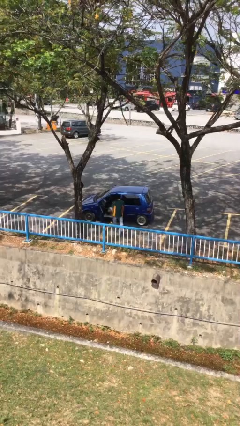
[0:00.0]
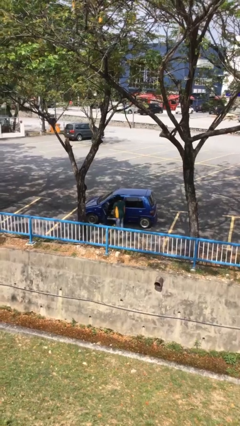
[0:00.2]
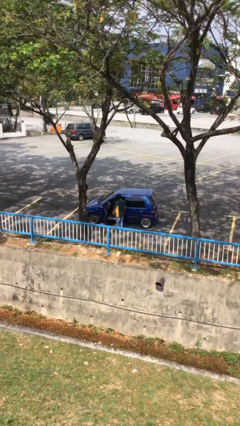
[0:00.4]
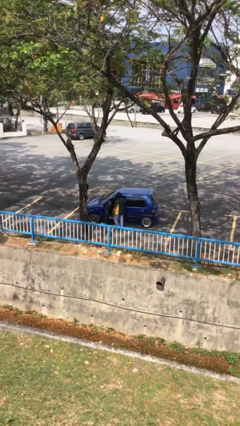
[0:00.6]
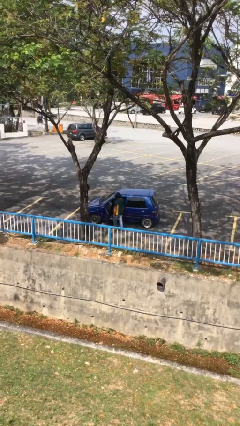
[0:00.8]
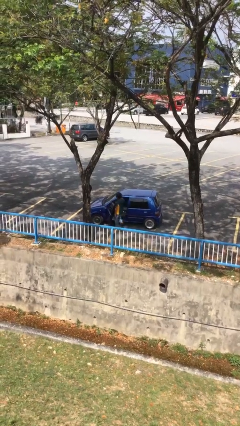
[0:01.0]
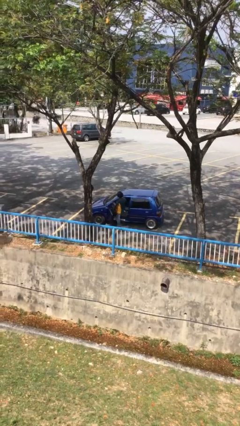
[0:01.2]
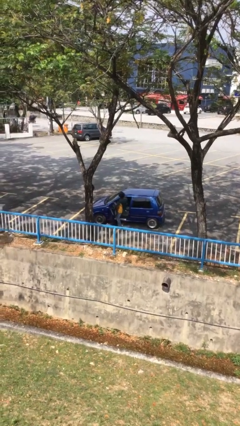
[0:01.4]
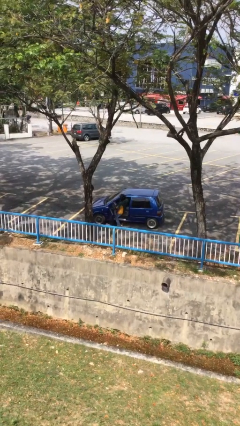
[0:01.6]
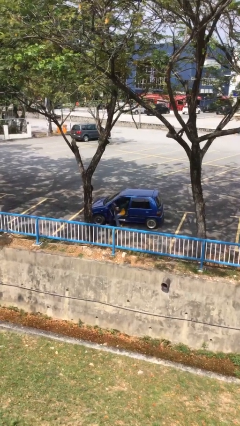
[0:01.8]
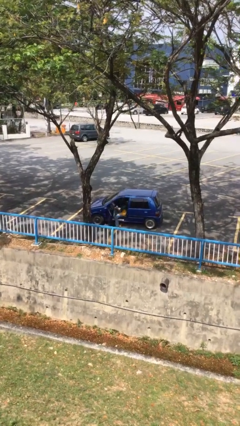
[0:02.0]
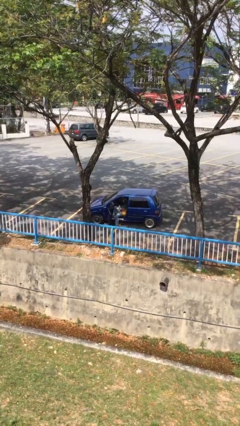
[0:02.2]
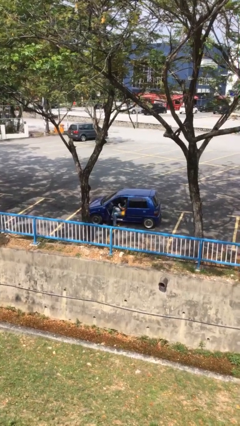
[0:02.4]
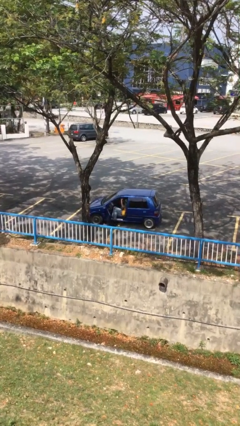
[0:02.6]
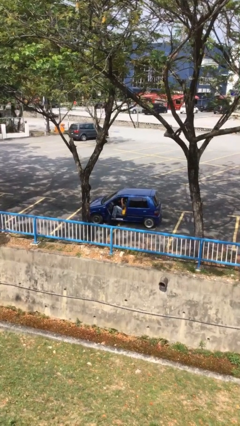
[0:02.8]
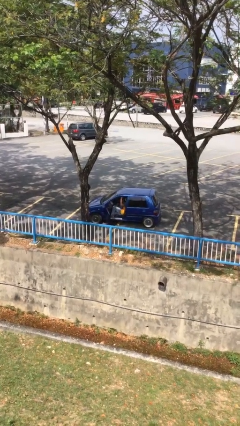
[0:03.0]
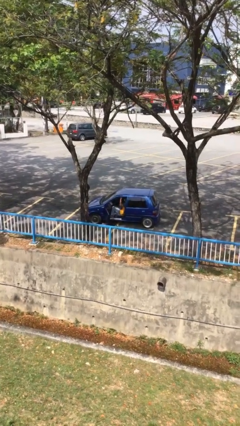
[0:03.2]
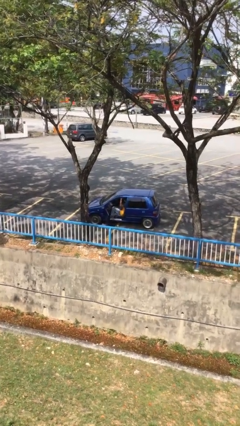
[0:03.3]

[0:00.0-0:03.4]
person enters car

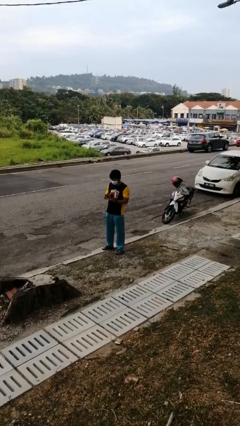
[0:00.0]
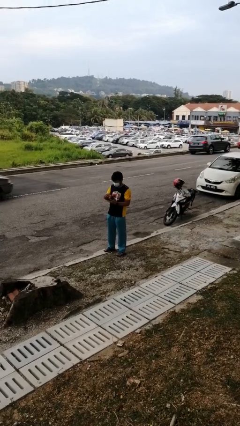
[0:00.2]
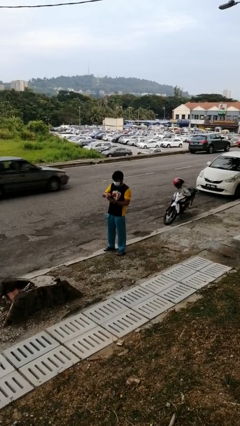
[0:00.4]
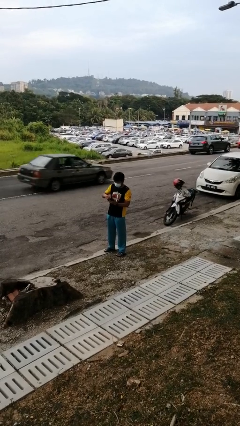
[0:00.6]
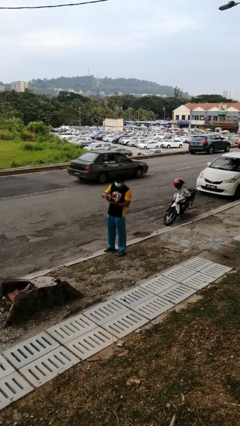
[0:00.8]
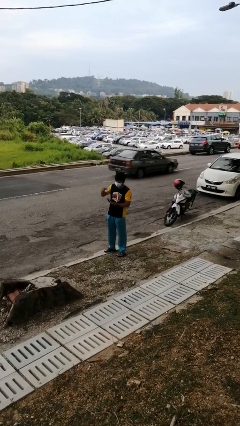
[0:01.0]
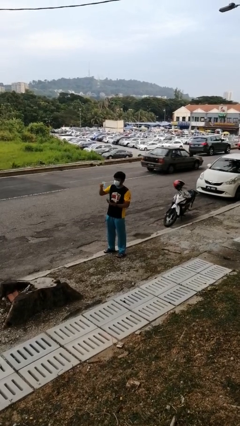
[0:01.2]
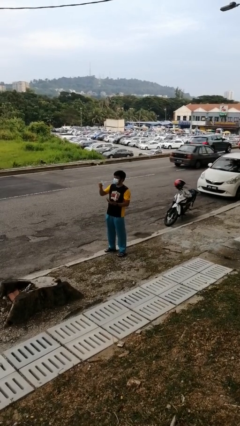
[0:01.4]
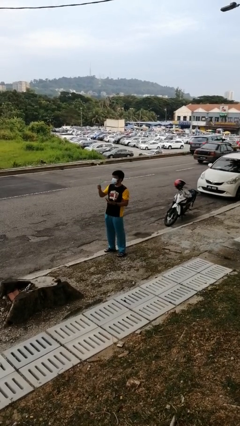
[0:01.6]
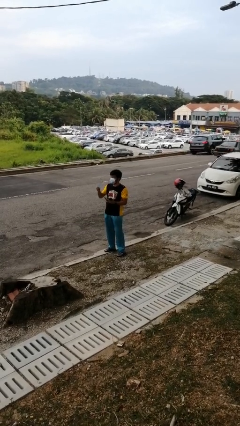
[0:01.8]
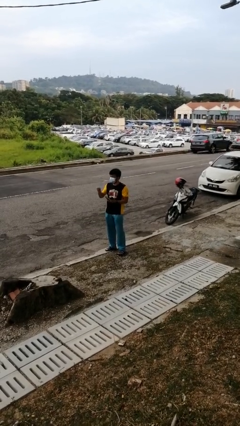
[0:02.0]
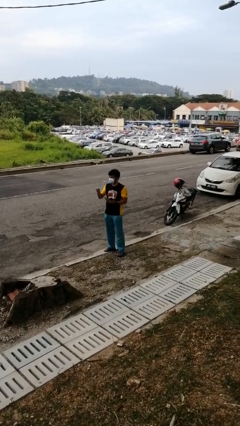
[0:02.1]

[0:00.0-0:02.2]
person takes object from purse

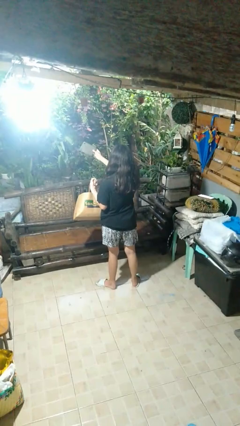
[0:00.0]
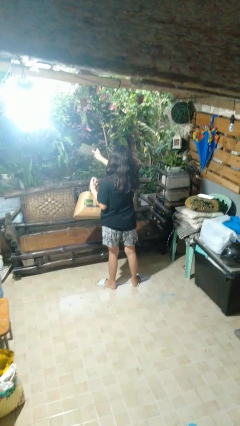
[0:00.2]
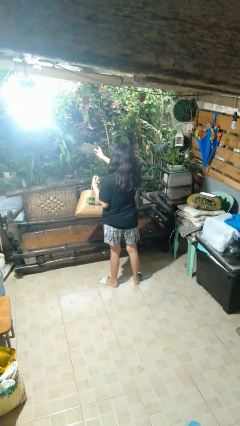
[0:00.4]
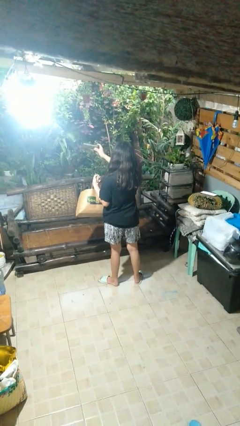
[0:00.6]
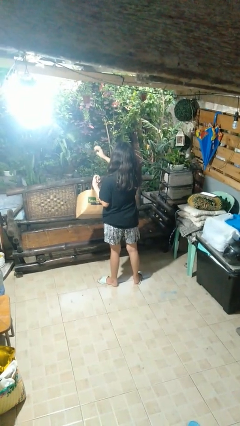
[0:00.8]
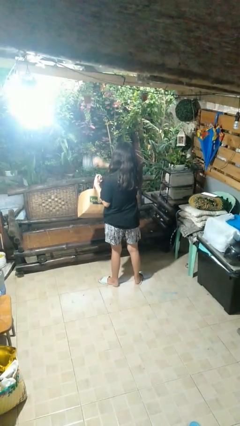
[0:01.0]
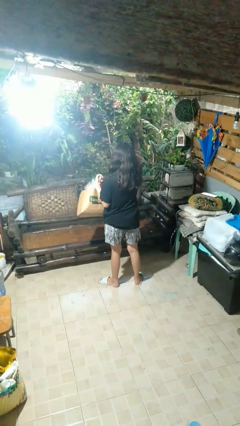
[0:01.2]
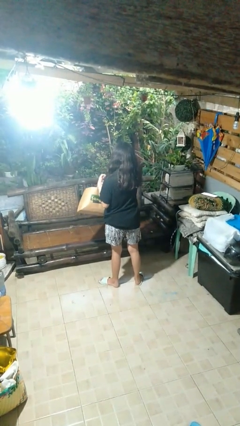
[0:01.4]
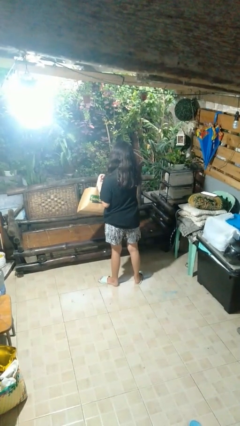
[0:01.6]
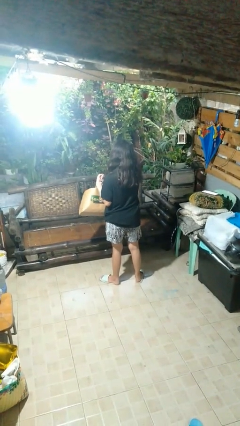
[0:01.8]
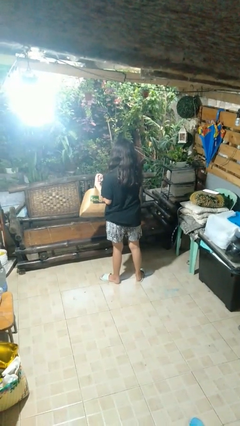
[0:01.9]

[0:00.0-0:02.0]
person puts object into bag

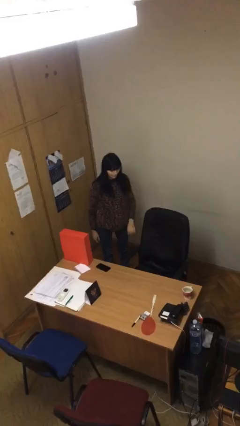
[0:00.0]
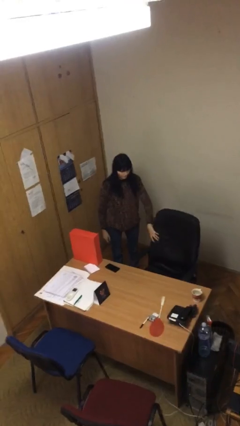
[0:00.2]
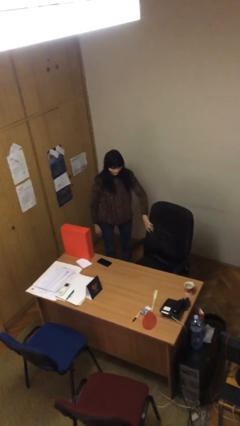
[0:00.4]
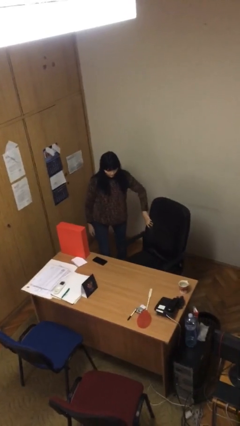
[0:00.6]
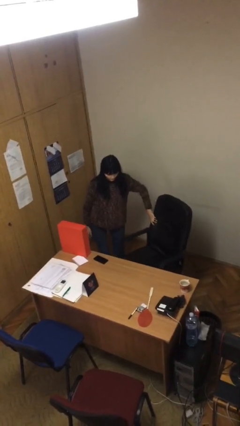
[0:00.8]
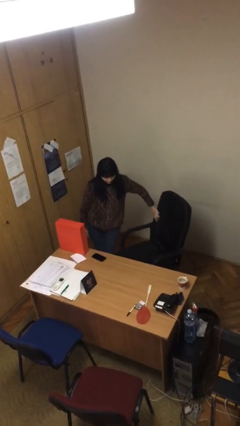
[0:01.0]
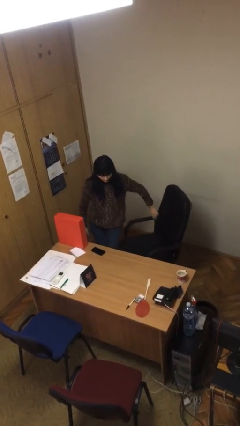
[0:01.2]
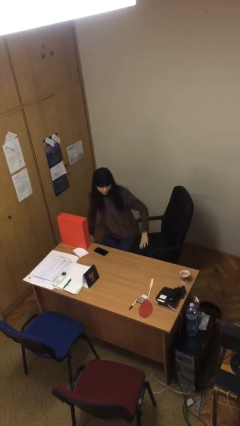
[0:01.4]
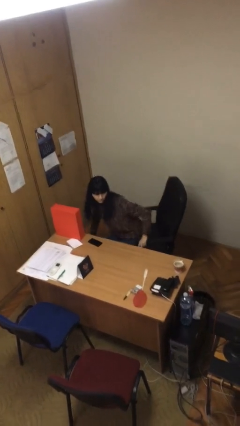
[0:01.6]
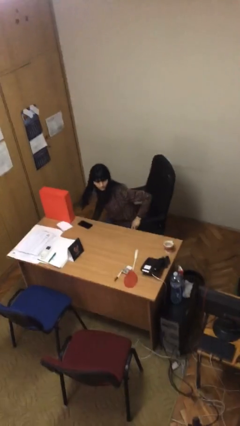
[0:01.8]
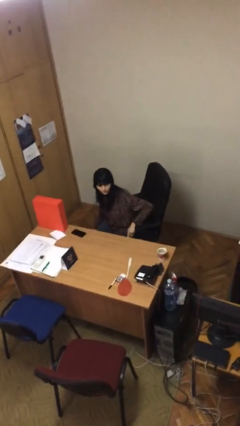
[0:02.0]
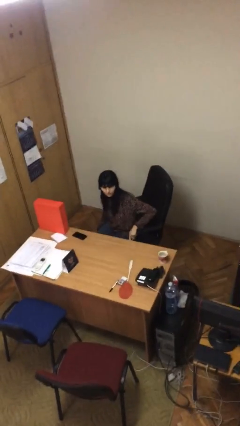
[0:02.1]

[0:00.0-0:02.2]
person sits down

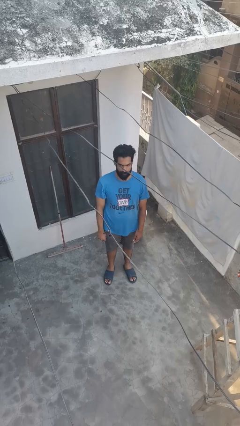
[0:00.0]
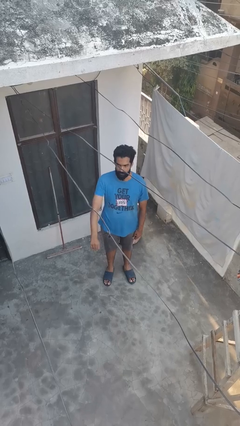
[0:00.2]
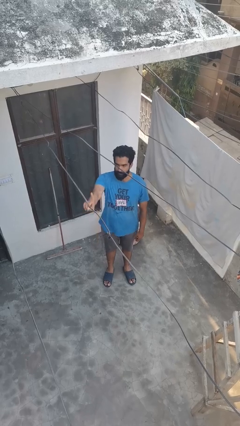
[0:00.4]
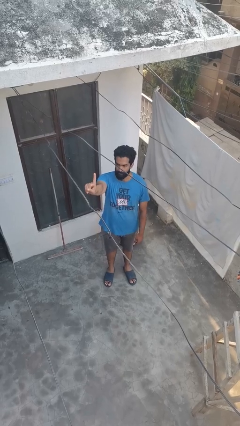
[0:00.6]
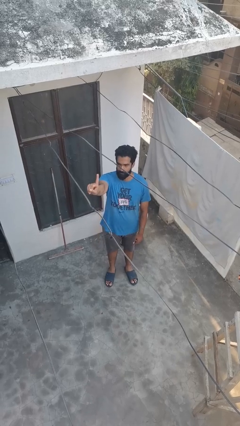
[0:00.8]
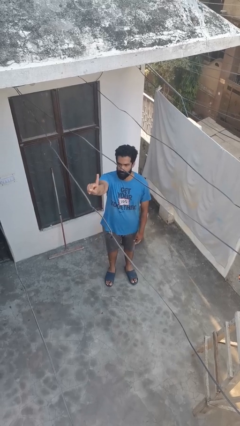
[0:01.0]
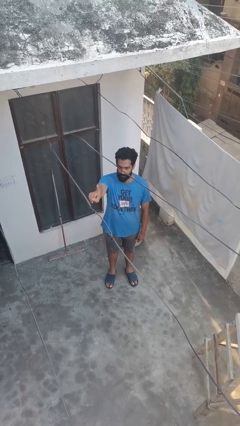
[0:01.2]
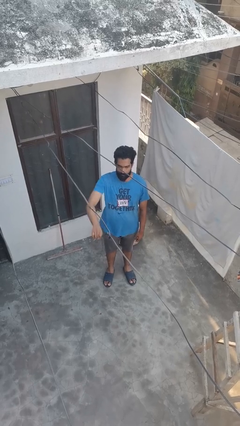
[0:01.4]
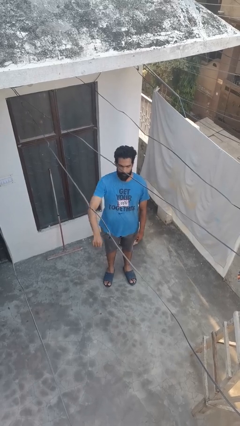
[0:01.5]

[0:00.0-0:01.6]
person gestures number one

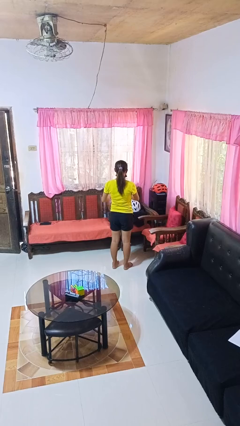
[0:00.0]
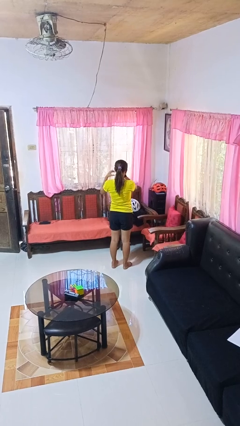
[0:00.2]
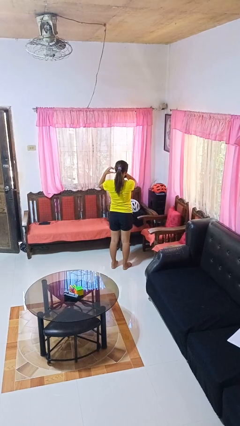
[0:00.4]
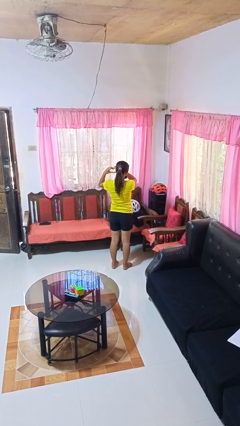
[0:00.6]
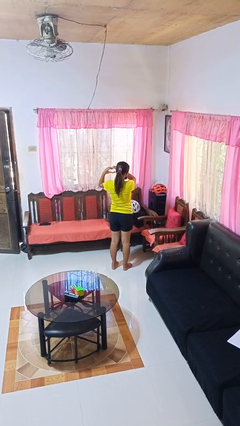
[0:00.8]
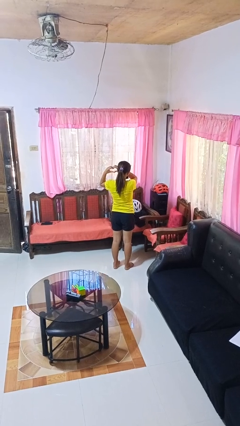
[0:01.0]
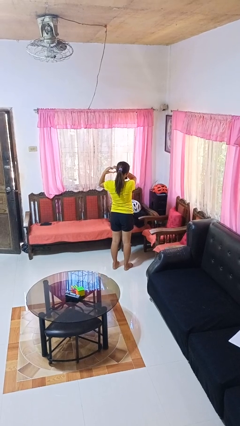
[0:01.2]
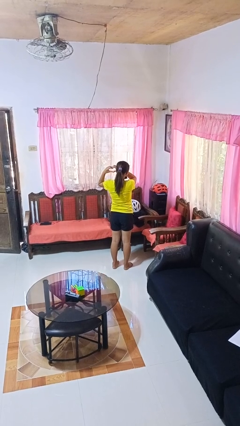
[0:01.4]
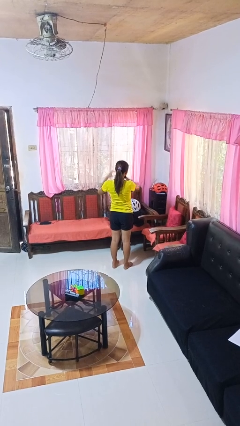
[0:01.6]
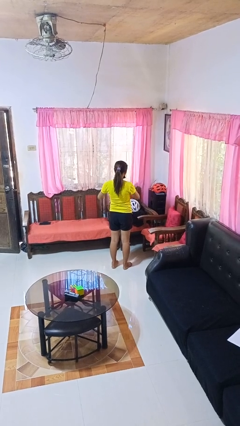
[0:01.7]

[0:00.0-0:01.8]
person gestures heart

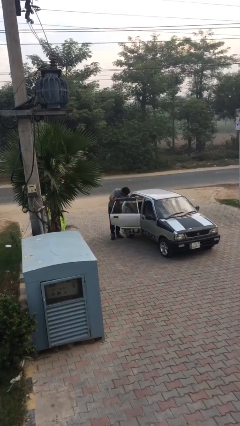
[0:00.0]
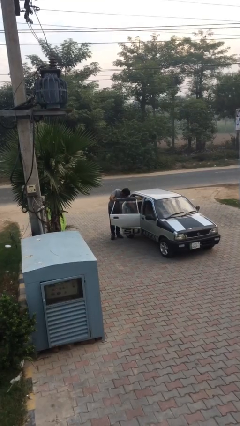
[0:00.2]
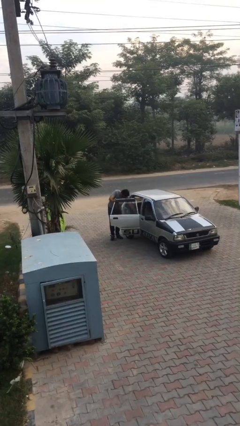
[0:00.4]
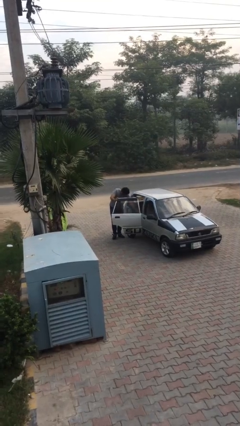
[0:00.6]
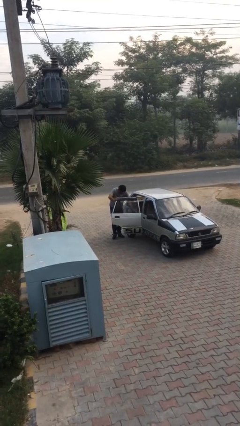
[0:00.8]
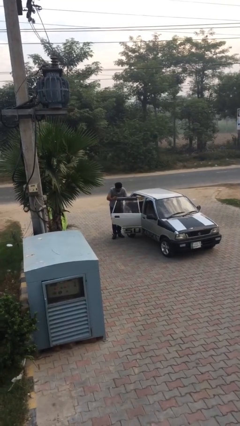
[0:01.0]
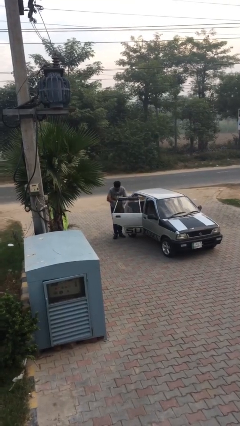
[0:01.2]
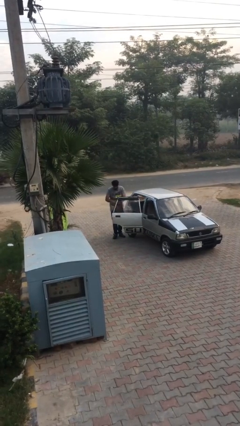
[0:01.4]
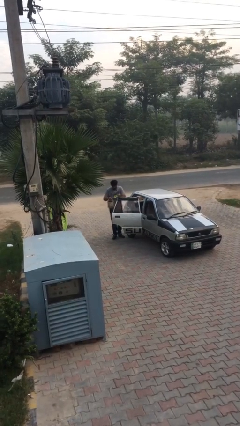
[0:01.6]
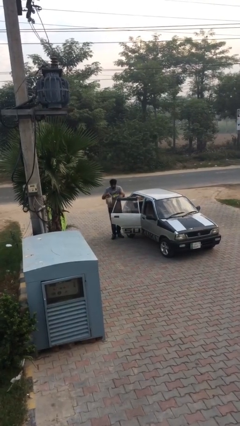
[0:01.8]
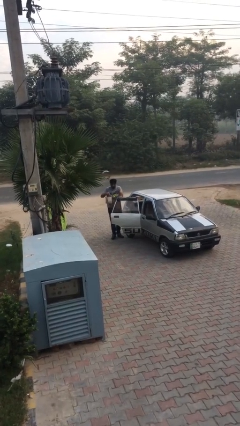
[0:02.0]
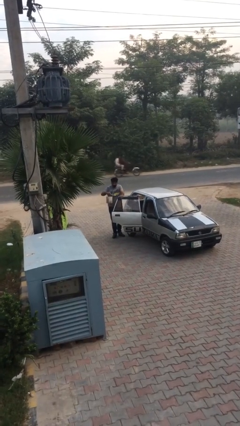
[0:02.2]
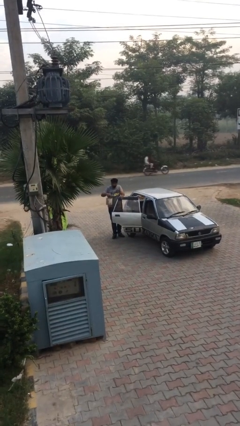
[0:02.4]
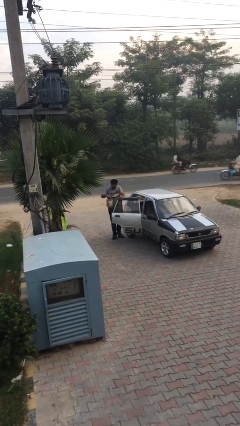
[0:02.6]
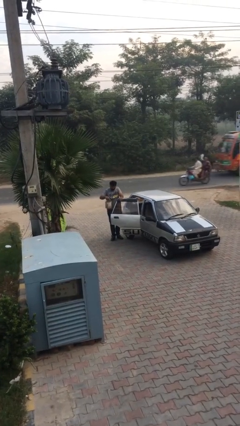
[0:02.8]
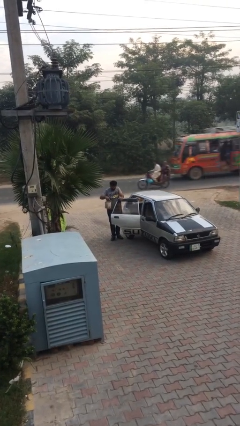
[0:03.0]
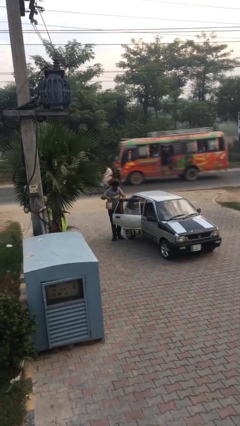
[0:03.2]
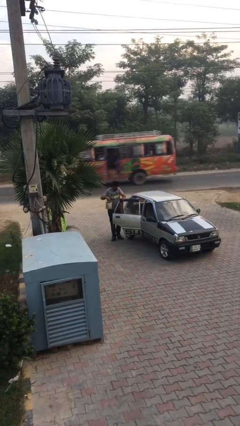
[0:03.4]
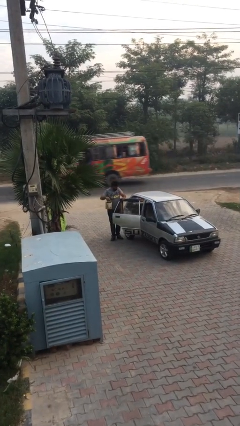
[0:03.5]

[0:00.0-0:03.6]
person unloads car

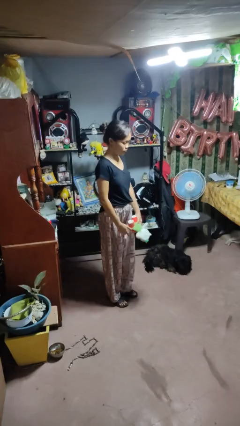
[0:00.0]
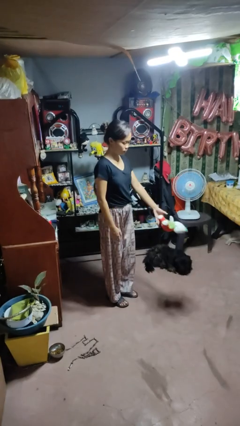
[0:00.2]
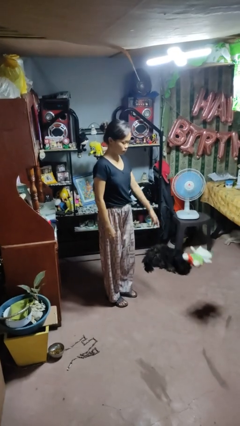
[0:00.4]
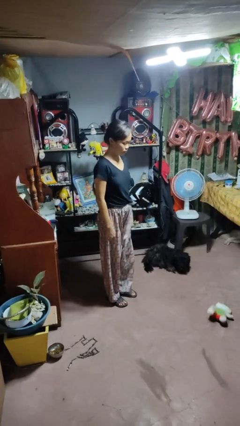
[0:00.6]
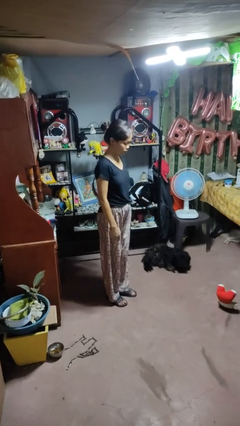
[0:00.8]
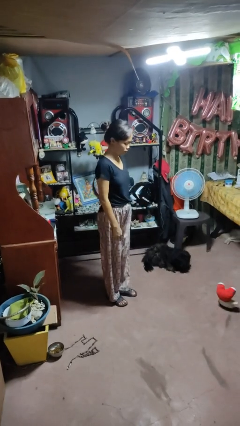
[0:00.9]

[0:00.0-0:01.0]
person throws object to ground
